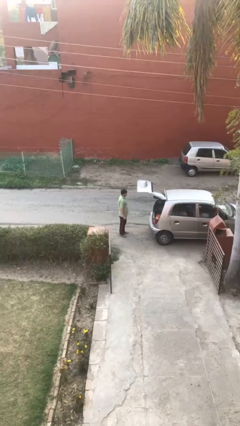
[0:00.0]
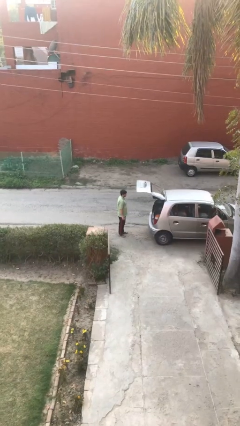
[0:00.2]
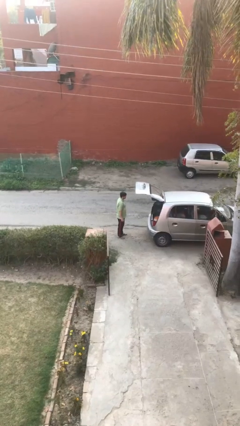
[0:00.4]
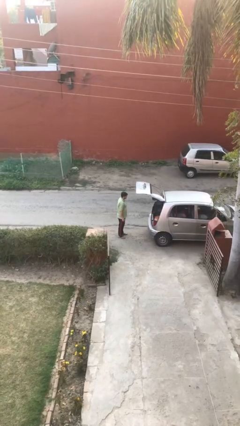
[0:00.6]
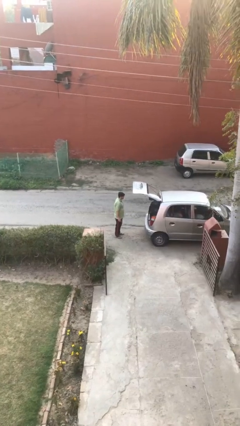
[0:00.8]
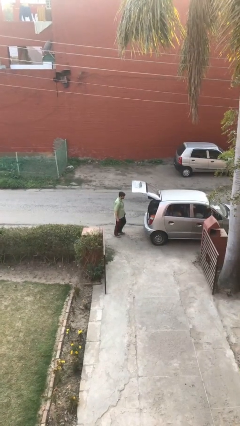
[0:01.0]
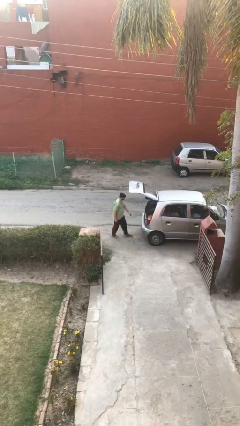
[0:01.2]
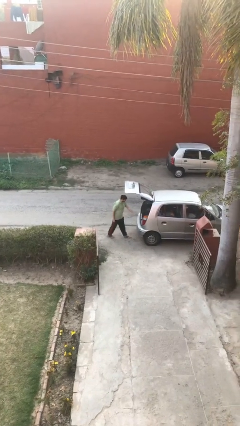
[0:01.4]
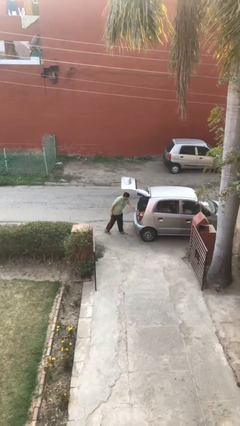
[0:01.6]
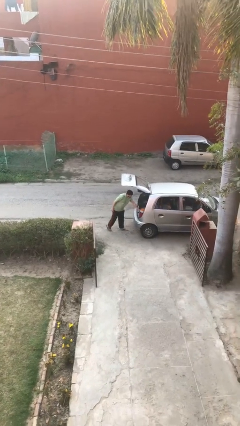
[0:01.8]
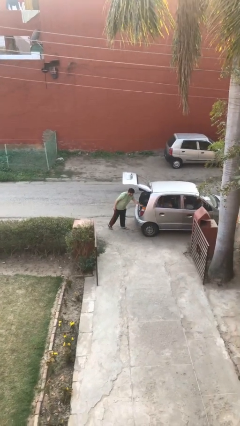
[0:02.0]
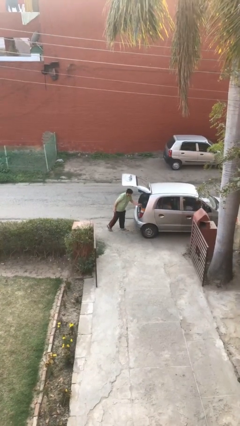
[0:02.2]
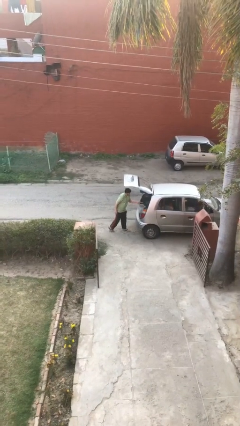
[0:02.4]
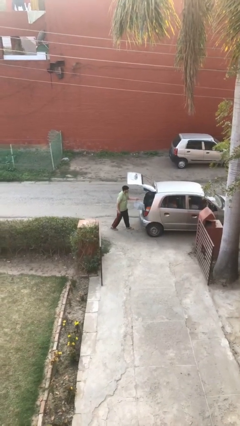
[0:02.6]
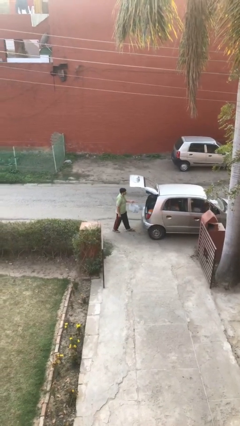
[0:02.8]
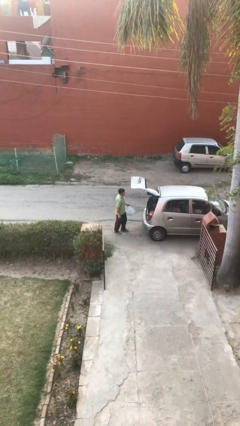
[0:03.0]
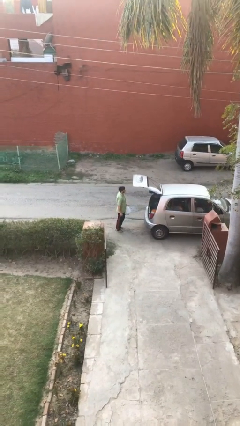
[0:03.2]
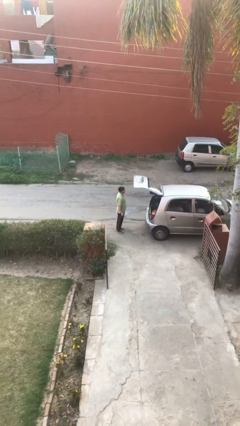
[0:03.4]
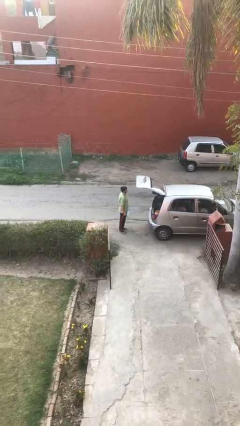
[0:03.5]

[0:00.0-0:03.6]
person unloads car

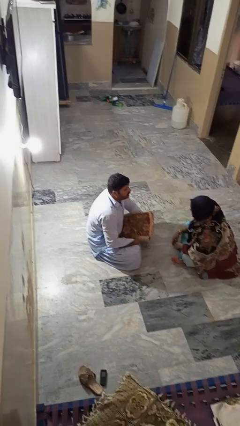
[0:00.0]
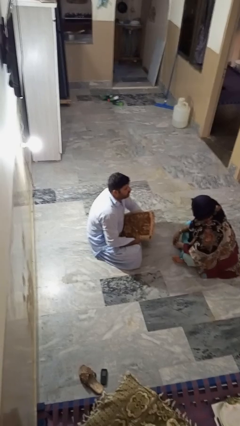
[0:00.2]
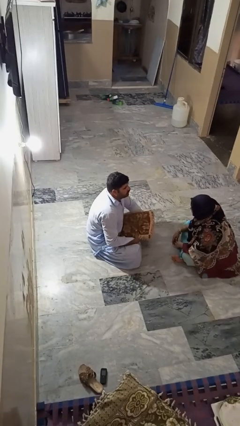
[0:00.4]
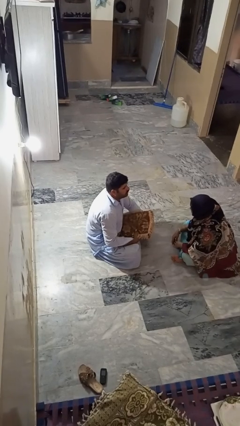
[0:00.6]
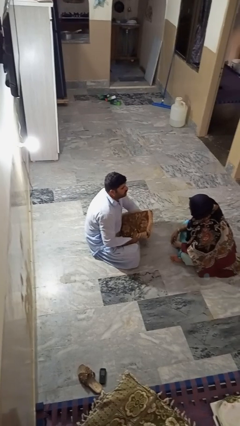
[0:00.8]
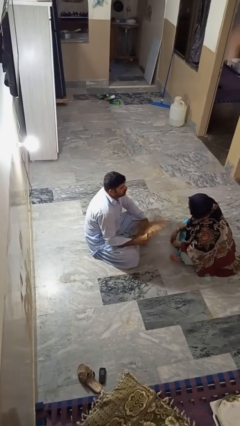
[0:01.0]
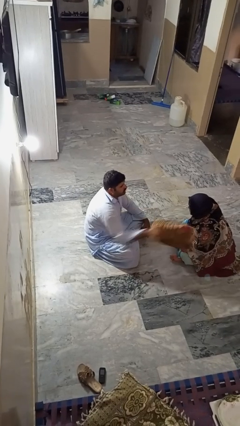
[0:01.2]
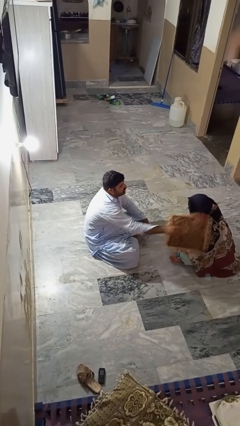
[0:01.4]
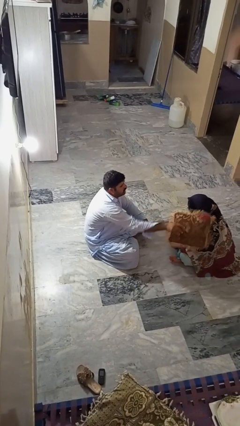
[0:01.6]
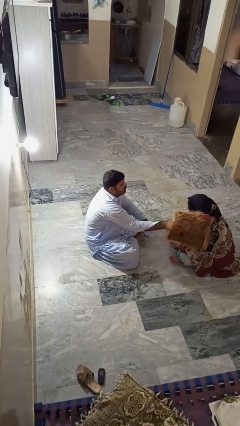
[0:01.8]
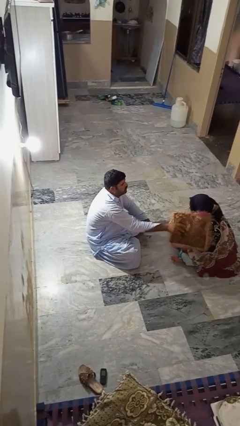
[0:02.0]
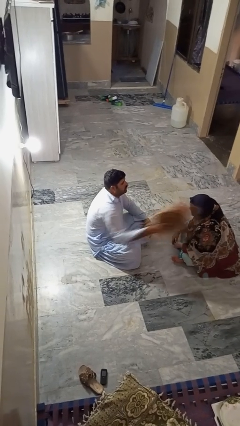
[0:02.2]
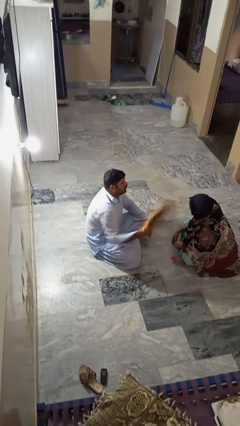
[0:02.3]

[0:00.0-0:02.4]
person hits person with pillow

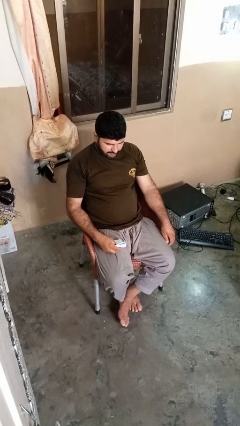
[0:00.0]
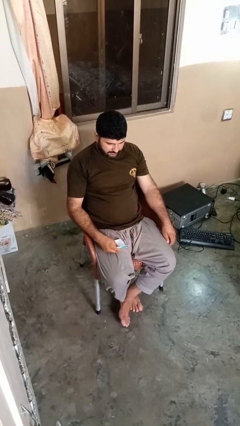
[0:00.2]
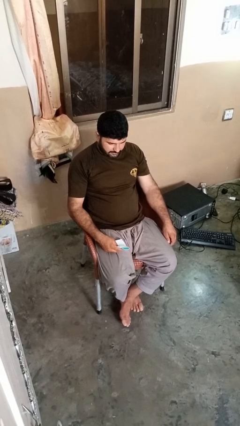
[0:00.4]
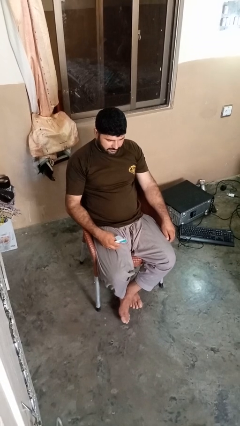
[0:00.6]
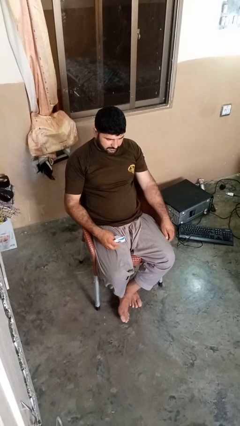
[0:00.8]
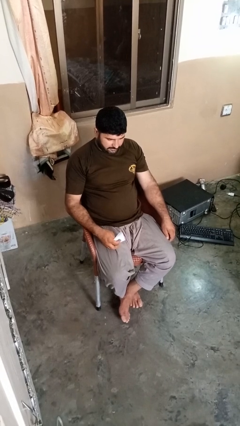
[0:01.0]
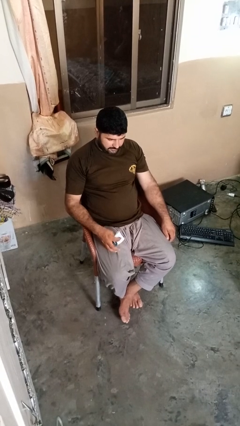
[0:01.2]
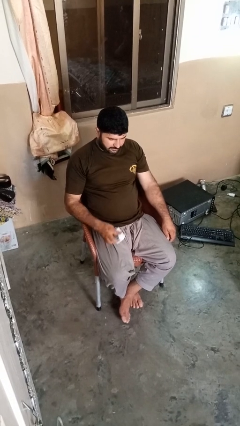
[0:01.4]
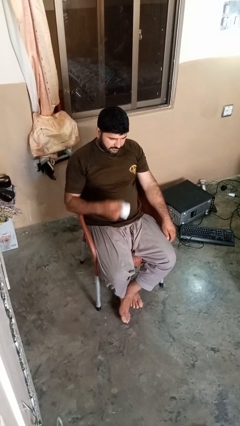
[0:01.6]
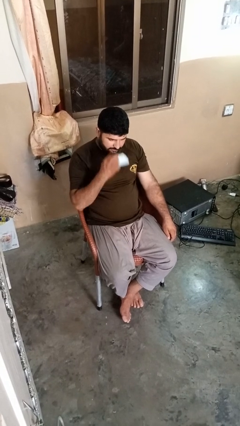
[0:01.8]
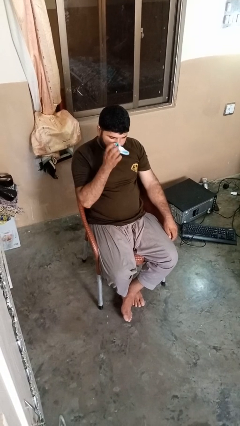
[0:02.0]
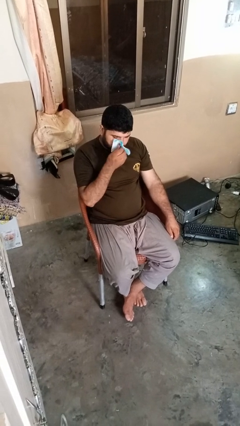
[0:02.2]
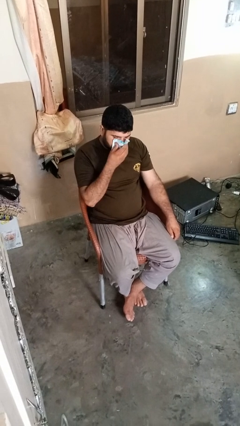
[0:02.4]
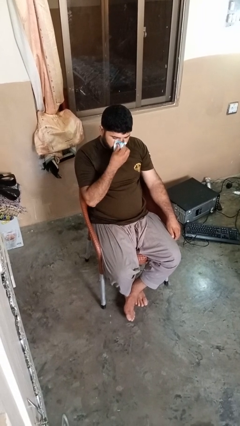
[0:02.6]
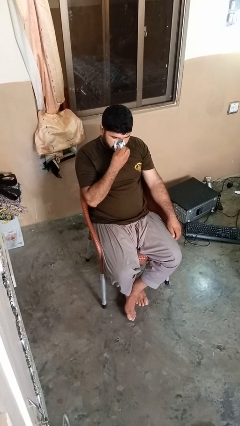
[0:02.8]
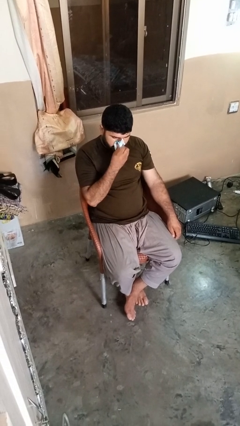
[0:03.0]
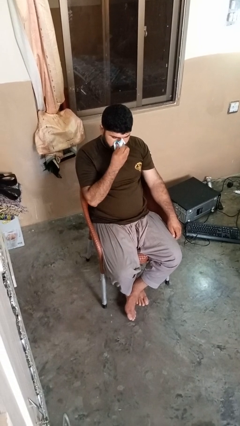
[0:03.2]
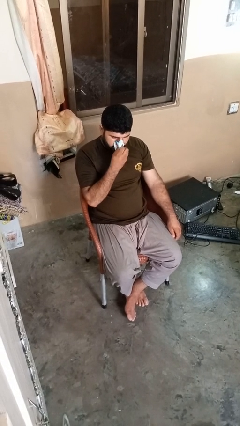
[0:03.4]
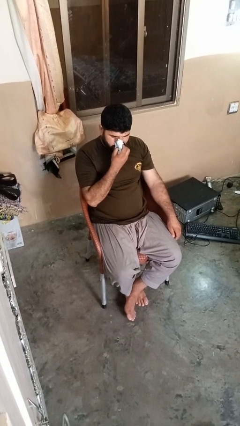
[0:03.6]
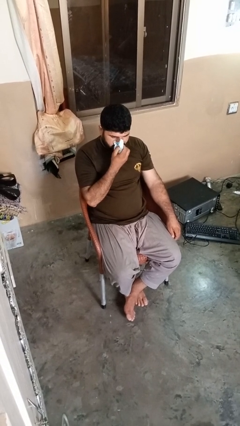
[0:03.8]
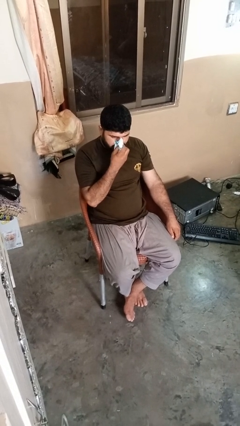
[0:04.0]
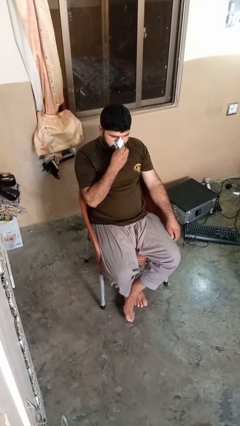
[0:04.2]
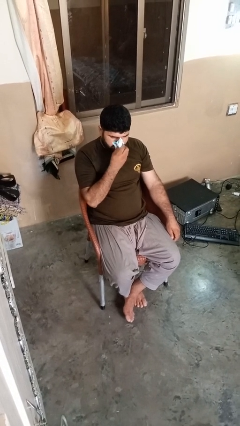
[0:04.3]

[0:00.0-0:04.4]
person blows nose

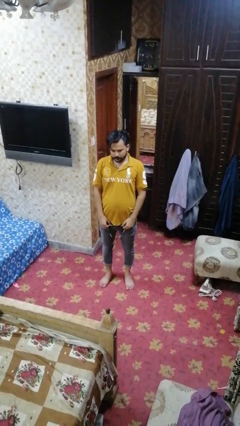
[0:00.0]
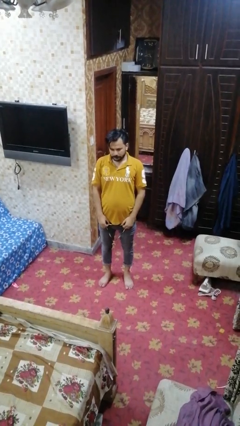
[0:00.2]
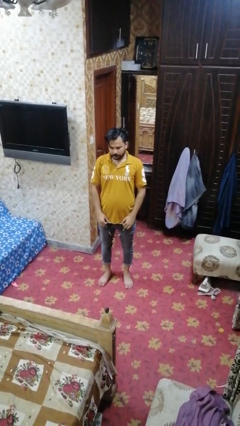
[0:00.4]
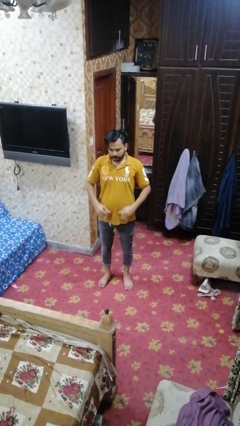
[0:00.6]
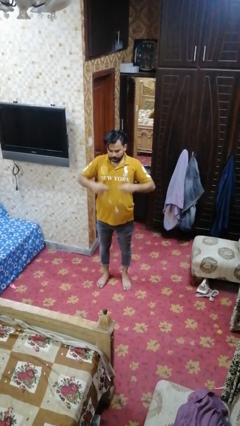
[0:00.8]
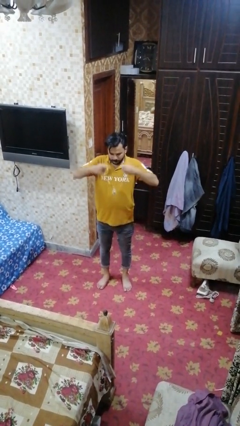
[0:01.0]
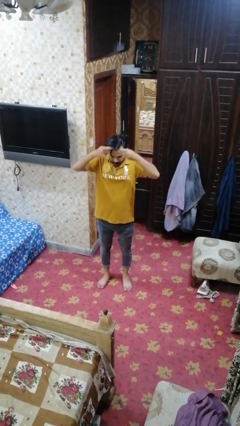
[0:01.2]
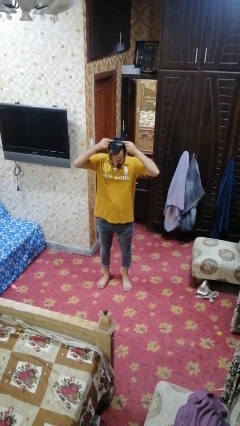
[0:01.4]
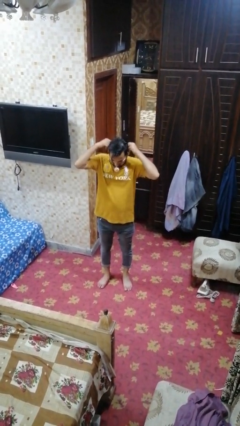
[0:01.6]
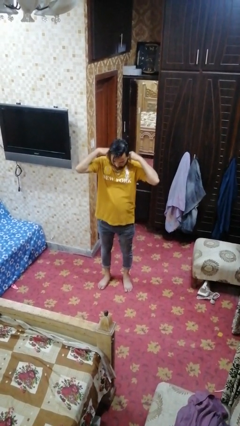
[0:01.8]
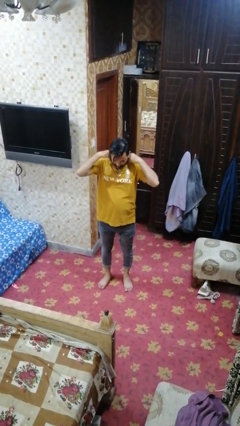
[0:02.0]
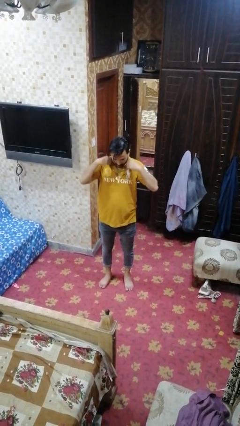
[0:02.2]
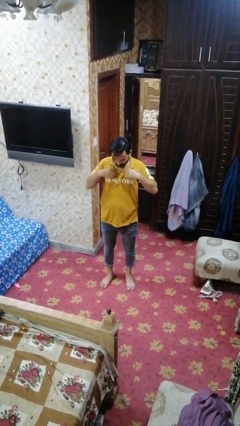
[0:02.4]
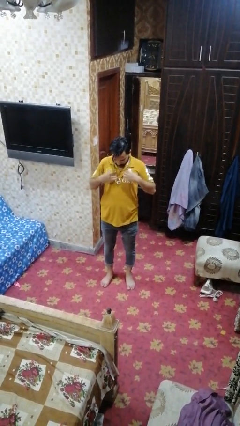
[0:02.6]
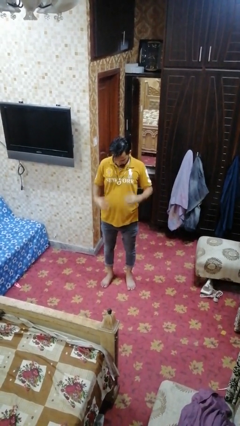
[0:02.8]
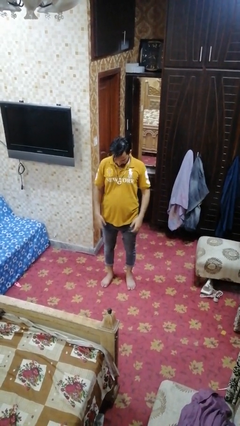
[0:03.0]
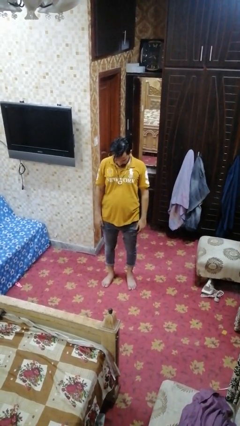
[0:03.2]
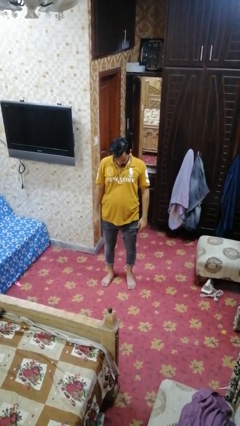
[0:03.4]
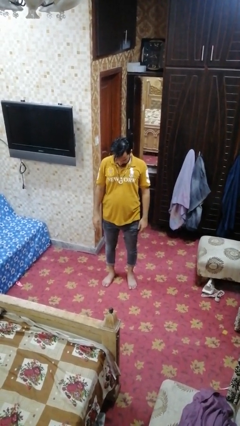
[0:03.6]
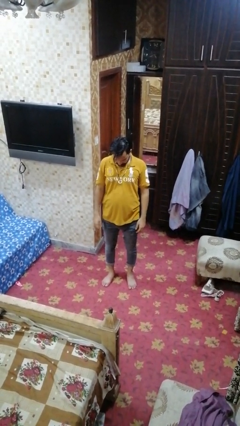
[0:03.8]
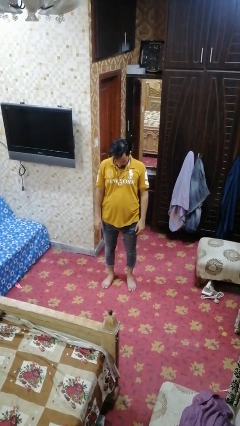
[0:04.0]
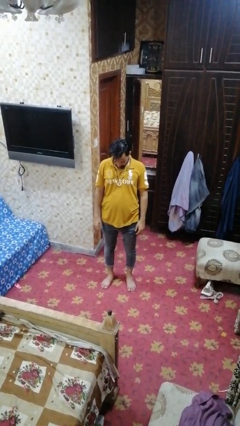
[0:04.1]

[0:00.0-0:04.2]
person puts on necklace

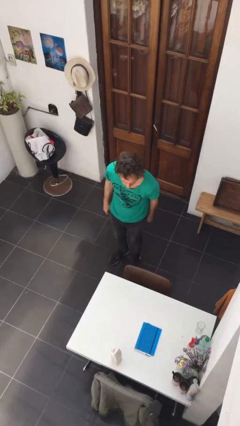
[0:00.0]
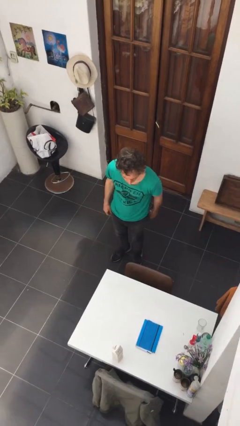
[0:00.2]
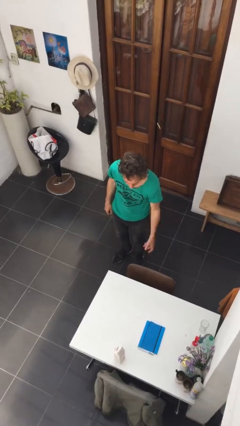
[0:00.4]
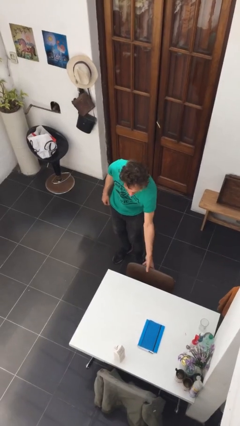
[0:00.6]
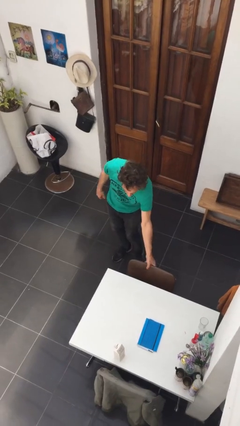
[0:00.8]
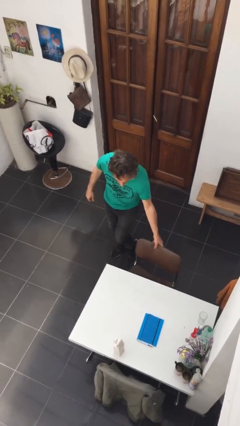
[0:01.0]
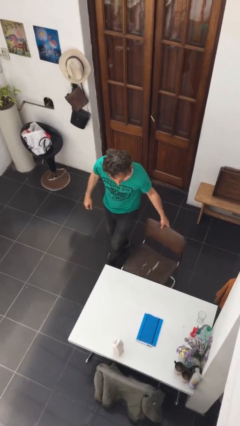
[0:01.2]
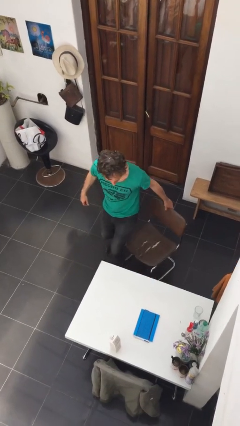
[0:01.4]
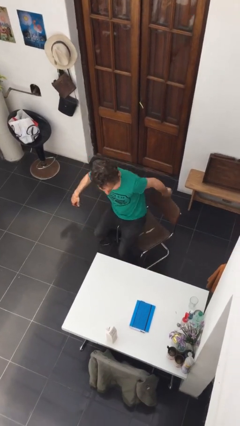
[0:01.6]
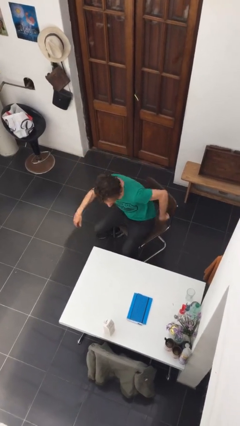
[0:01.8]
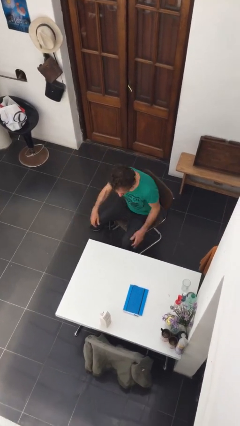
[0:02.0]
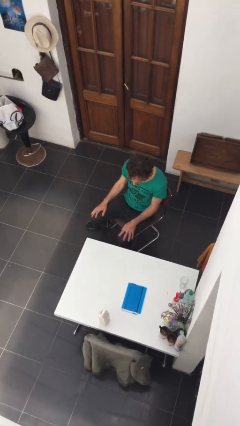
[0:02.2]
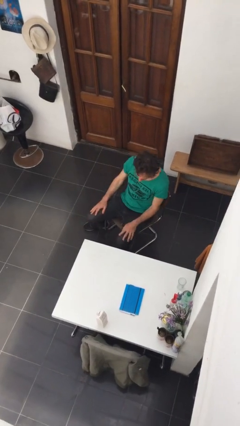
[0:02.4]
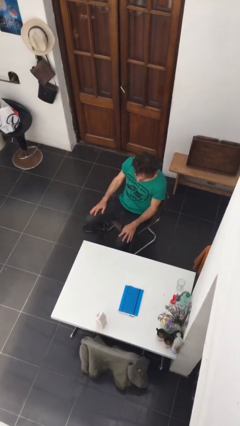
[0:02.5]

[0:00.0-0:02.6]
person sits down

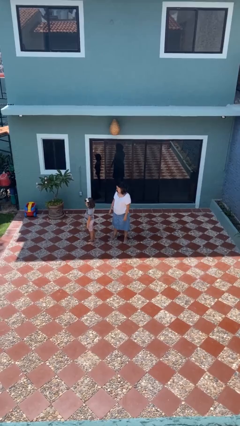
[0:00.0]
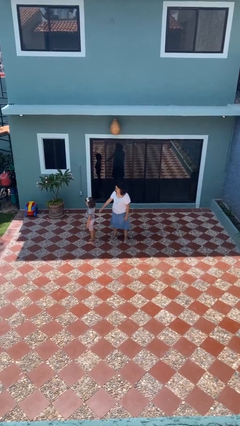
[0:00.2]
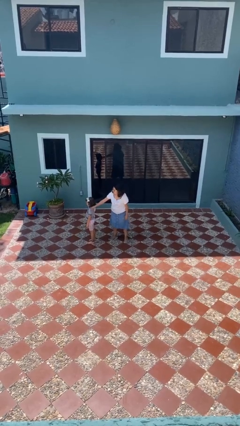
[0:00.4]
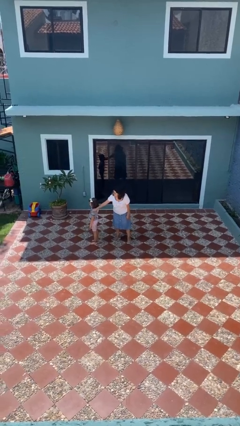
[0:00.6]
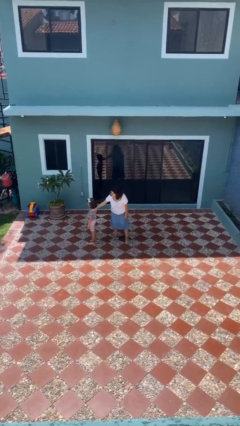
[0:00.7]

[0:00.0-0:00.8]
person grabs person by shoulder
